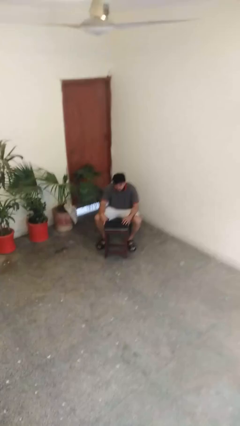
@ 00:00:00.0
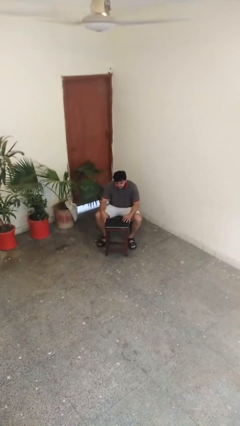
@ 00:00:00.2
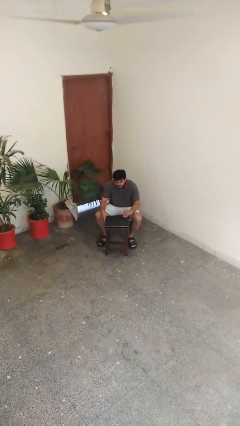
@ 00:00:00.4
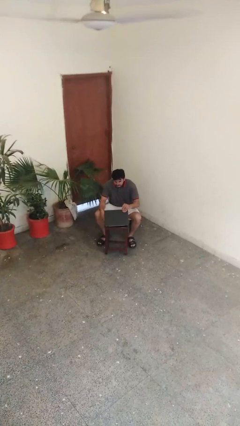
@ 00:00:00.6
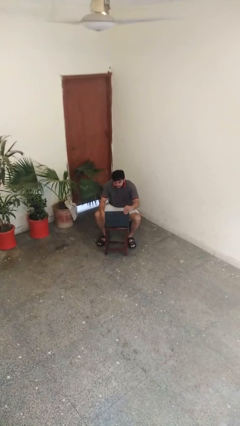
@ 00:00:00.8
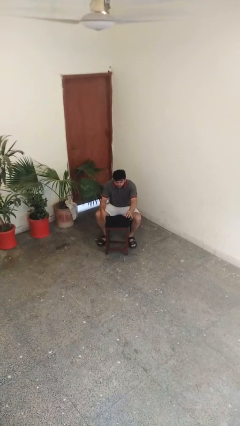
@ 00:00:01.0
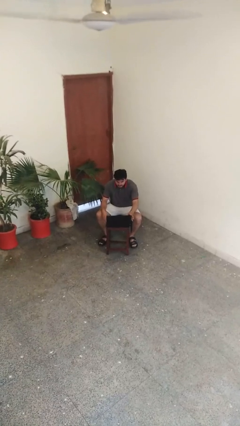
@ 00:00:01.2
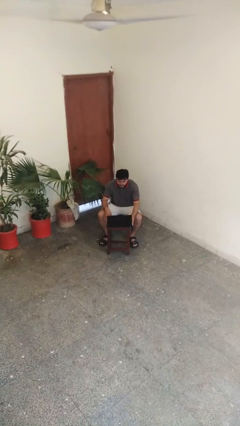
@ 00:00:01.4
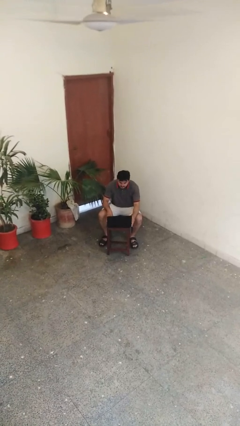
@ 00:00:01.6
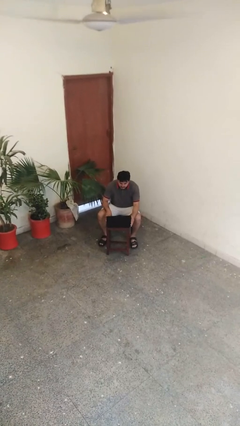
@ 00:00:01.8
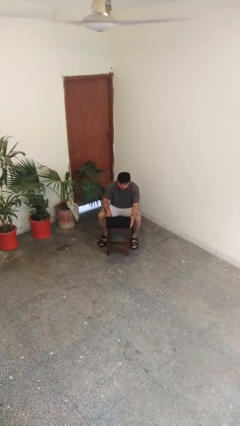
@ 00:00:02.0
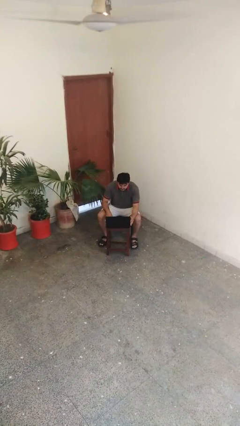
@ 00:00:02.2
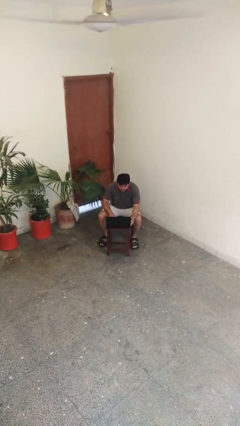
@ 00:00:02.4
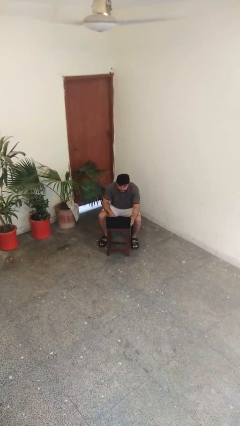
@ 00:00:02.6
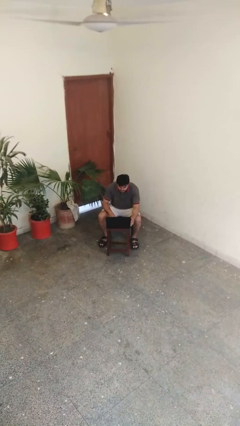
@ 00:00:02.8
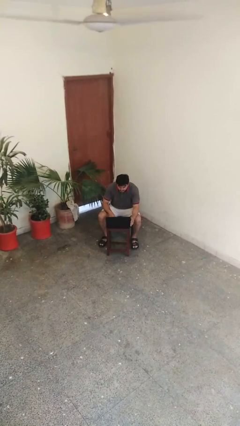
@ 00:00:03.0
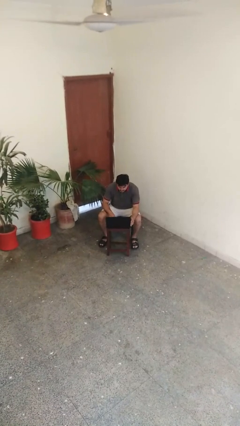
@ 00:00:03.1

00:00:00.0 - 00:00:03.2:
person opens laptop

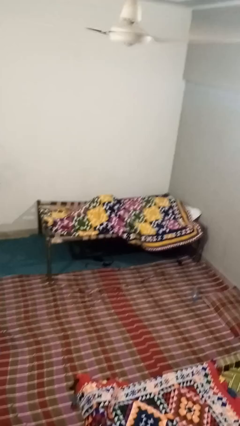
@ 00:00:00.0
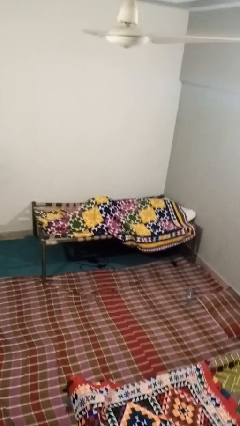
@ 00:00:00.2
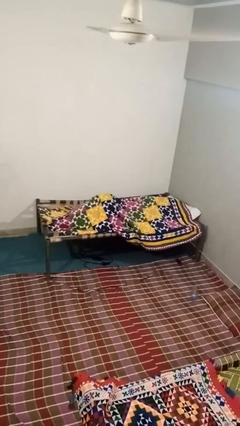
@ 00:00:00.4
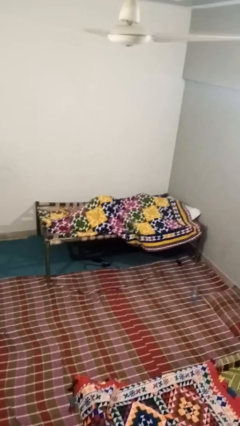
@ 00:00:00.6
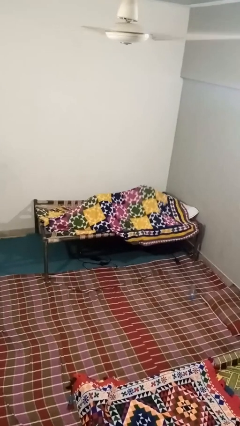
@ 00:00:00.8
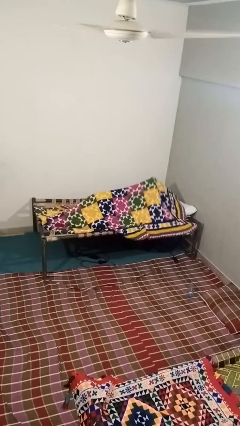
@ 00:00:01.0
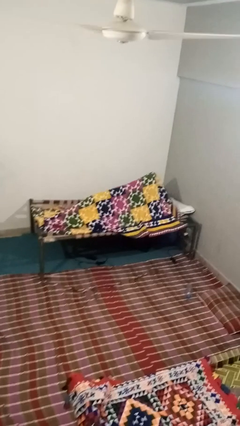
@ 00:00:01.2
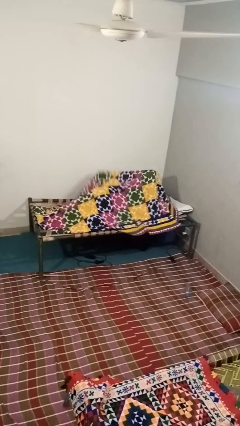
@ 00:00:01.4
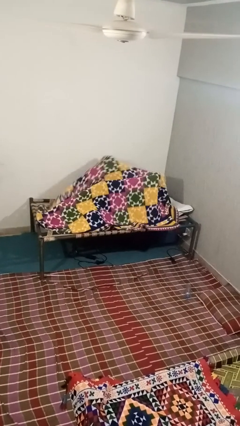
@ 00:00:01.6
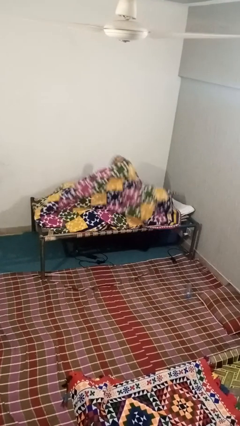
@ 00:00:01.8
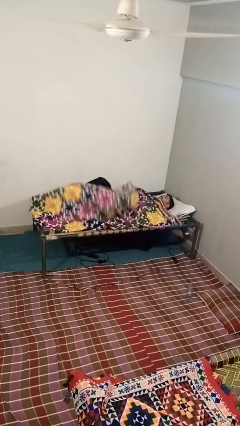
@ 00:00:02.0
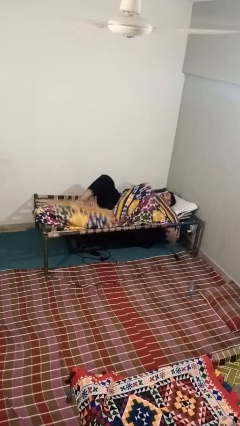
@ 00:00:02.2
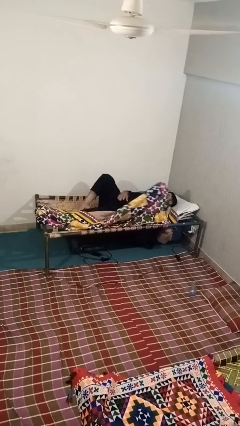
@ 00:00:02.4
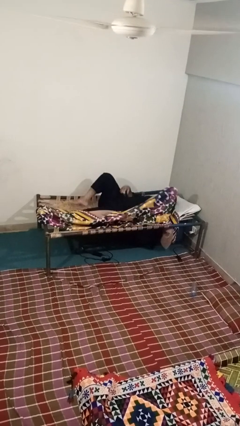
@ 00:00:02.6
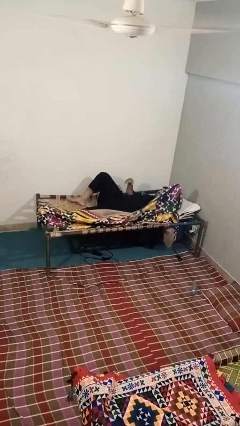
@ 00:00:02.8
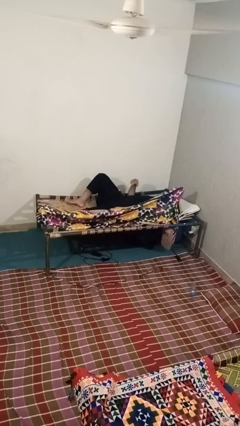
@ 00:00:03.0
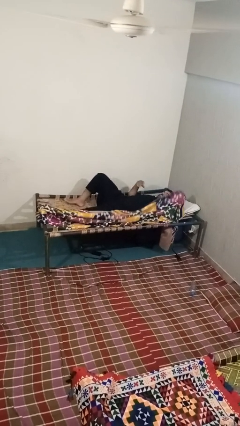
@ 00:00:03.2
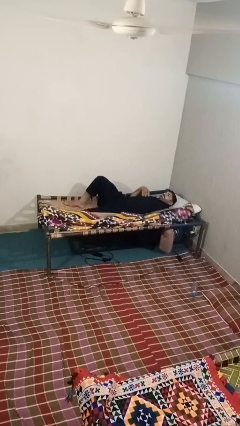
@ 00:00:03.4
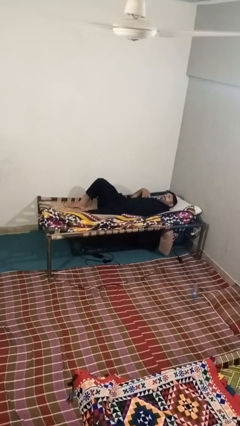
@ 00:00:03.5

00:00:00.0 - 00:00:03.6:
person uncovers with blanket

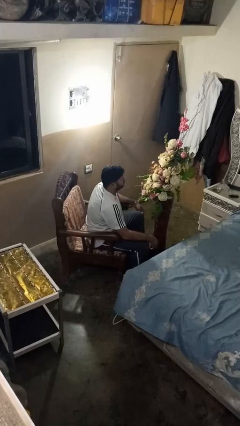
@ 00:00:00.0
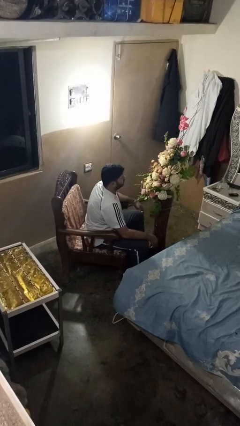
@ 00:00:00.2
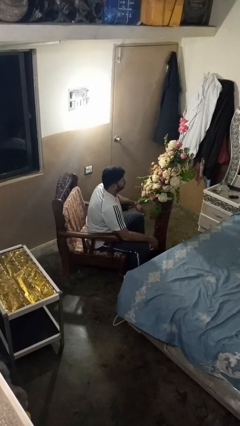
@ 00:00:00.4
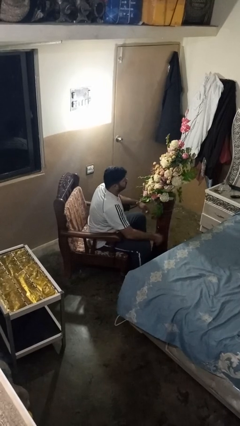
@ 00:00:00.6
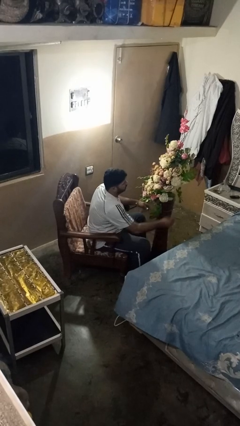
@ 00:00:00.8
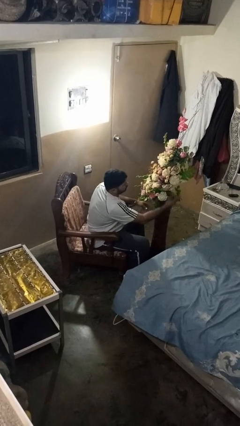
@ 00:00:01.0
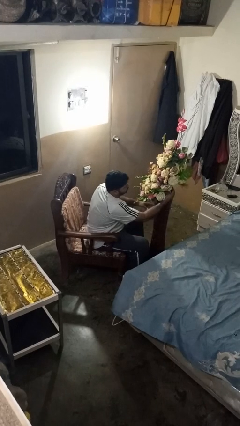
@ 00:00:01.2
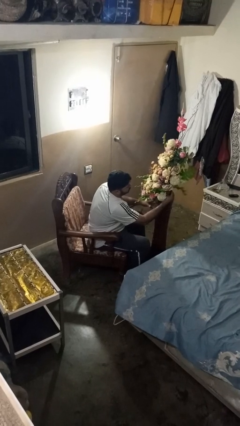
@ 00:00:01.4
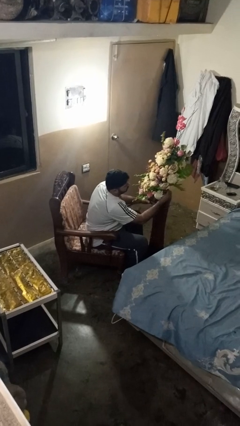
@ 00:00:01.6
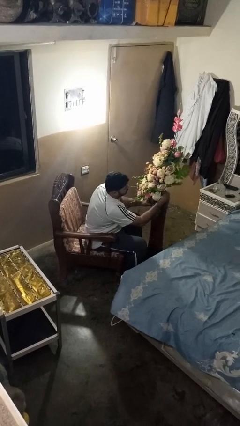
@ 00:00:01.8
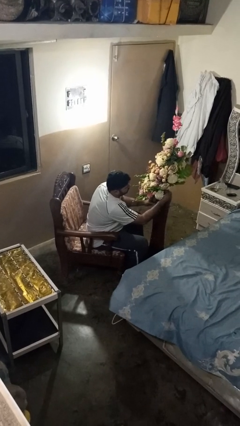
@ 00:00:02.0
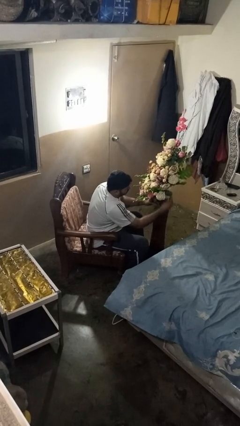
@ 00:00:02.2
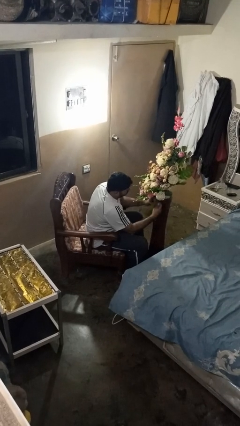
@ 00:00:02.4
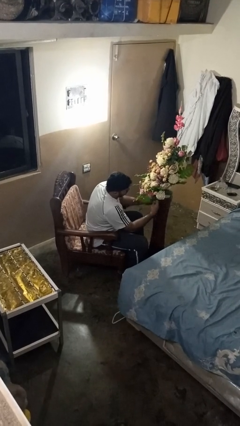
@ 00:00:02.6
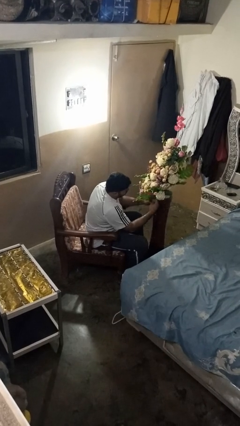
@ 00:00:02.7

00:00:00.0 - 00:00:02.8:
person arranges flowers in vase

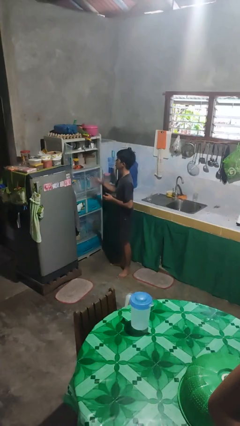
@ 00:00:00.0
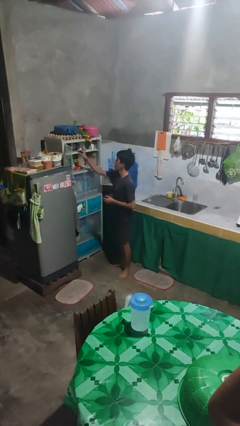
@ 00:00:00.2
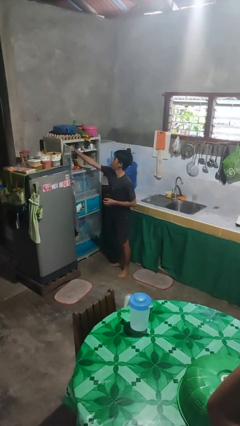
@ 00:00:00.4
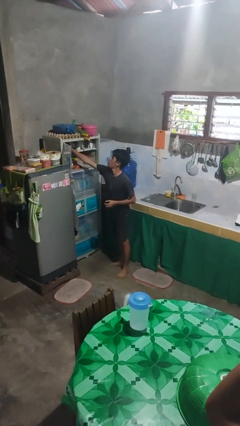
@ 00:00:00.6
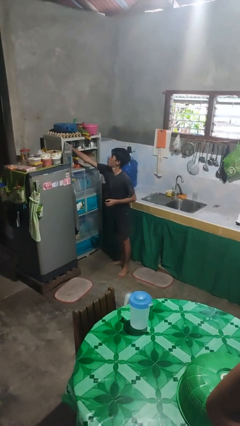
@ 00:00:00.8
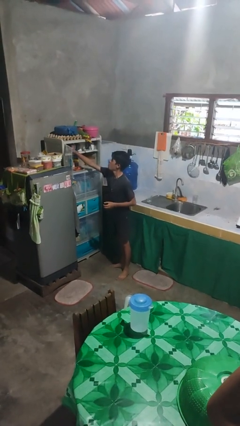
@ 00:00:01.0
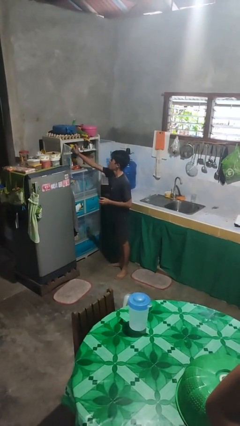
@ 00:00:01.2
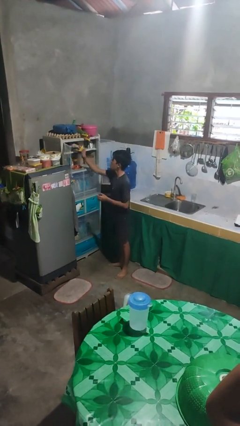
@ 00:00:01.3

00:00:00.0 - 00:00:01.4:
person takes object from cabinet

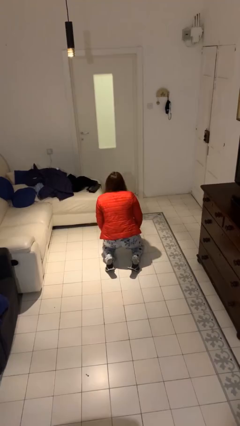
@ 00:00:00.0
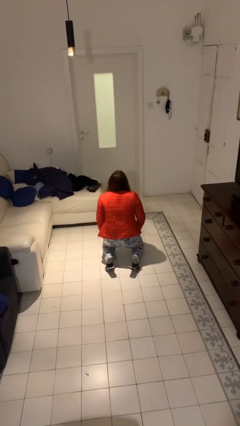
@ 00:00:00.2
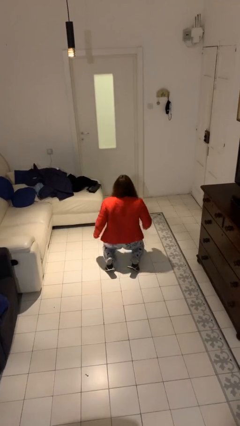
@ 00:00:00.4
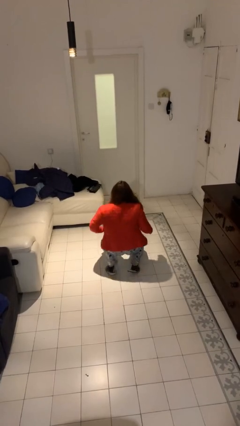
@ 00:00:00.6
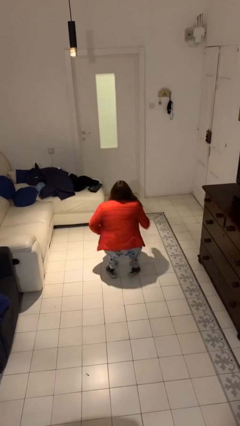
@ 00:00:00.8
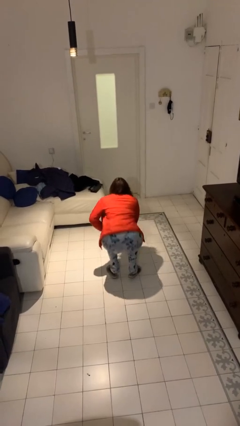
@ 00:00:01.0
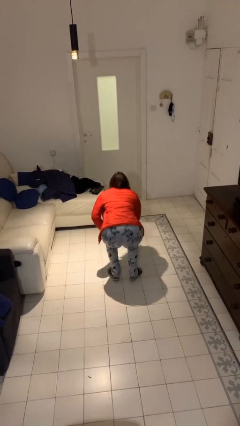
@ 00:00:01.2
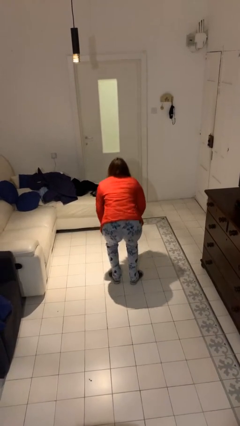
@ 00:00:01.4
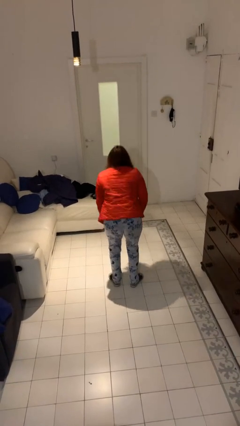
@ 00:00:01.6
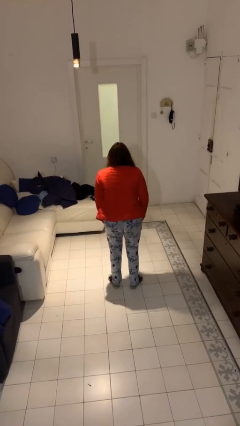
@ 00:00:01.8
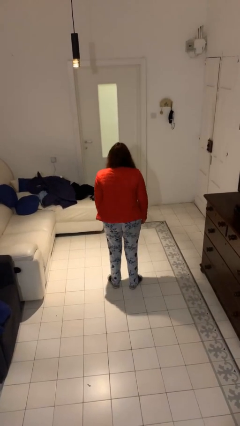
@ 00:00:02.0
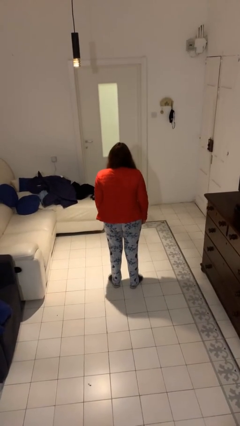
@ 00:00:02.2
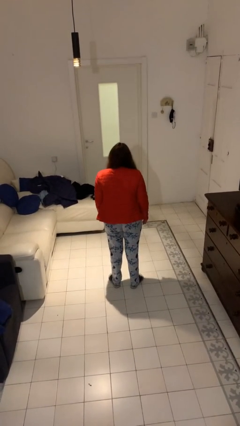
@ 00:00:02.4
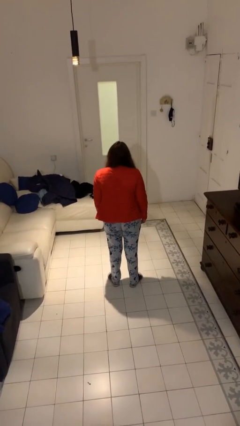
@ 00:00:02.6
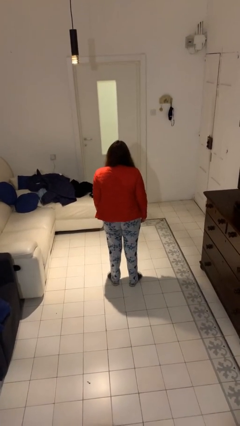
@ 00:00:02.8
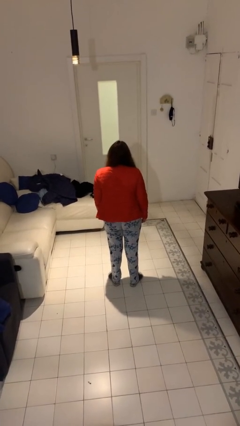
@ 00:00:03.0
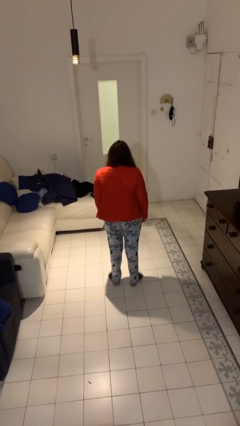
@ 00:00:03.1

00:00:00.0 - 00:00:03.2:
person stands up from floor

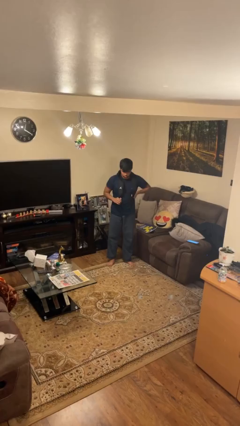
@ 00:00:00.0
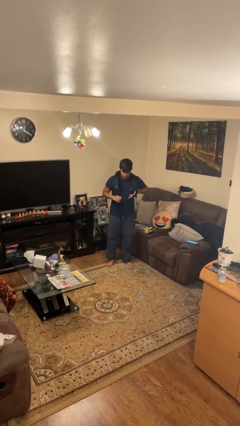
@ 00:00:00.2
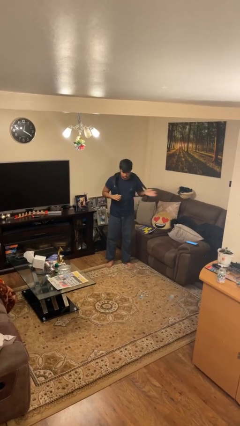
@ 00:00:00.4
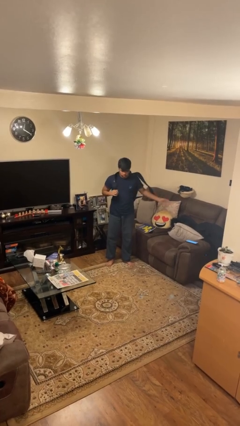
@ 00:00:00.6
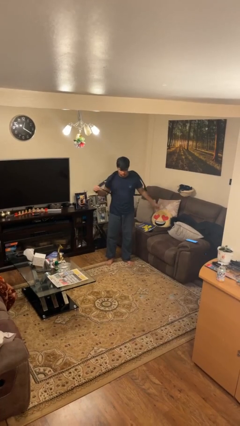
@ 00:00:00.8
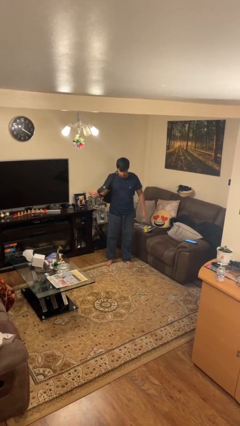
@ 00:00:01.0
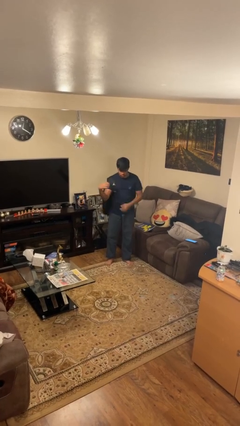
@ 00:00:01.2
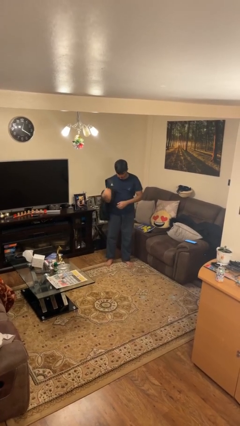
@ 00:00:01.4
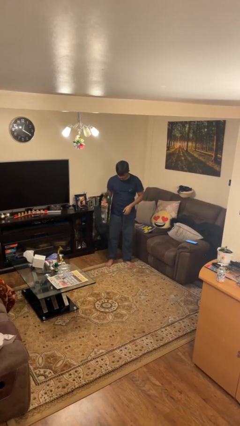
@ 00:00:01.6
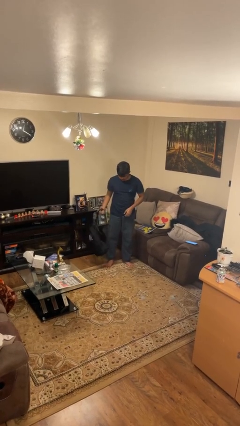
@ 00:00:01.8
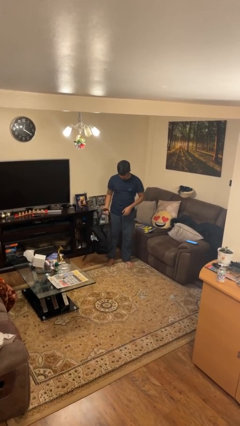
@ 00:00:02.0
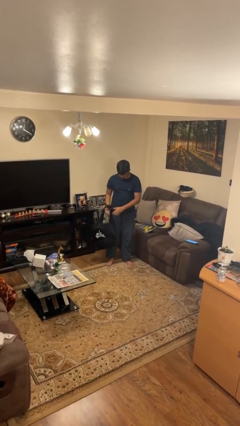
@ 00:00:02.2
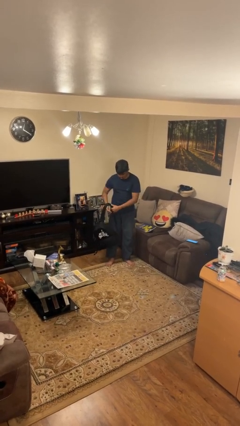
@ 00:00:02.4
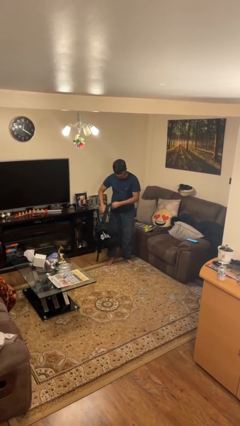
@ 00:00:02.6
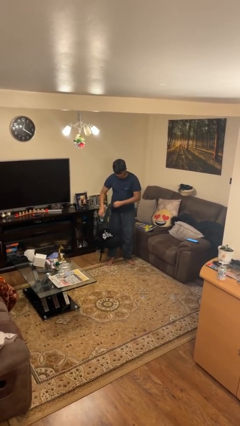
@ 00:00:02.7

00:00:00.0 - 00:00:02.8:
person takes off backpack
